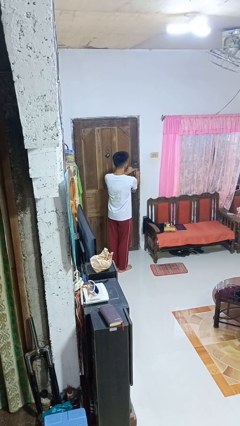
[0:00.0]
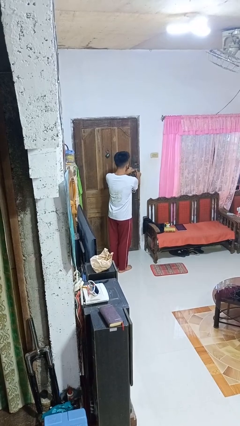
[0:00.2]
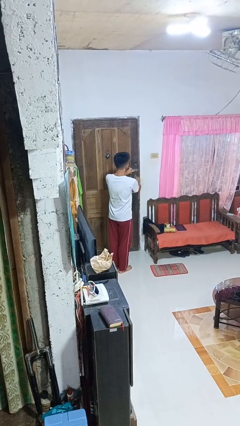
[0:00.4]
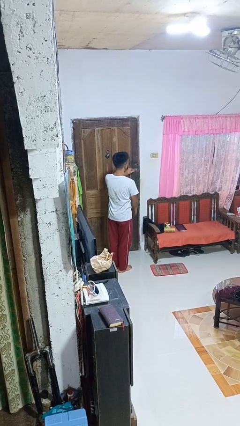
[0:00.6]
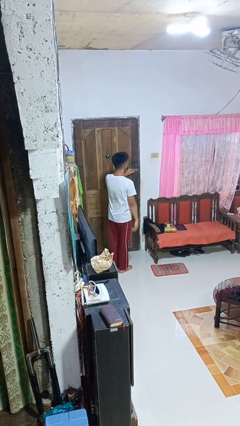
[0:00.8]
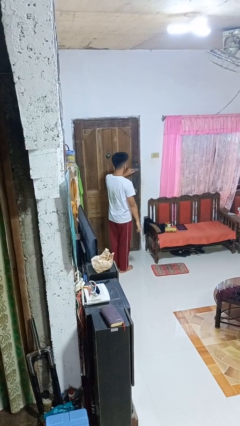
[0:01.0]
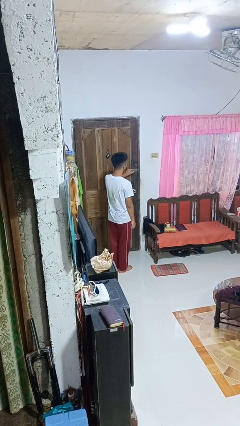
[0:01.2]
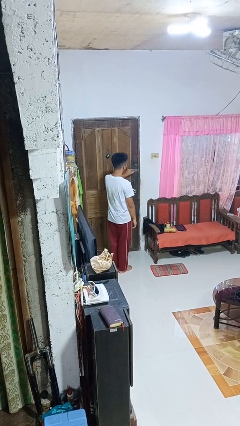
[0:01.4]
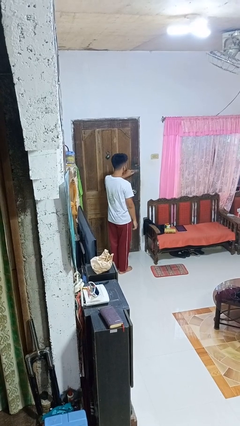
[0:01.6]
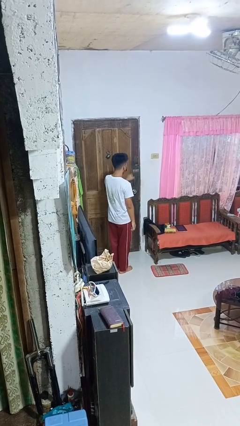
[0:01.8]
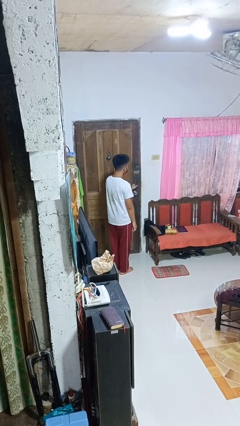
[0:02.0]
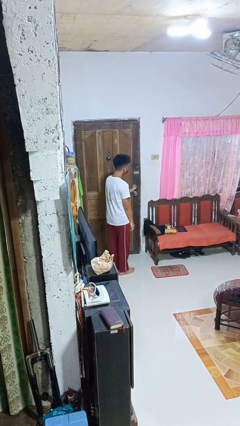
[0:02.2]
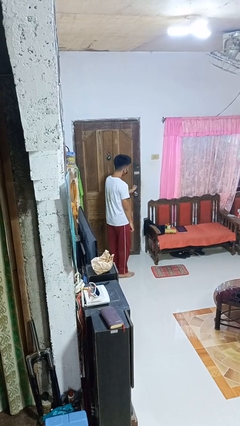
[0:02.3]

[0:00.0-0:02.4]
person unlocks door with keys

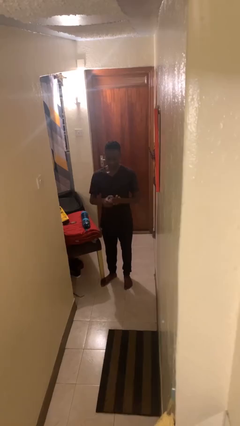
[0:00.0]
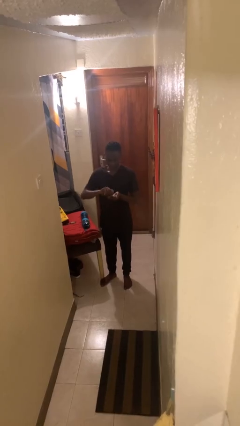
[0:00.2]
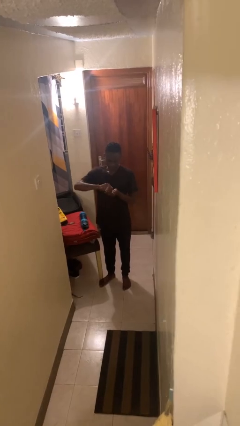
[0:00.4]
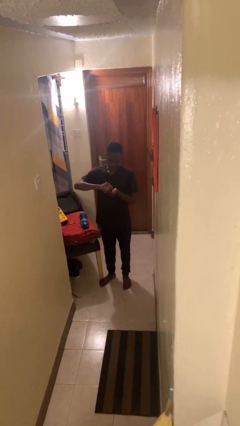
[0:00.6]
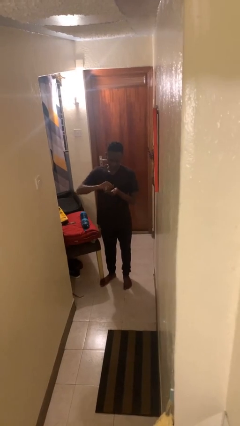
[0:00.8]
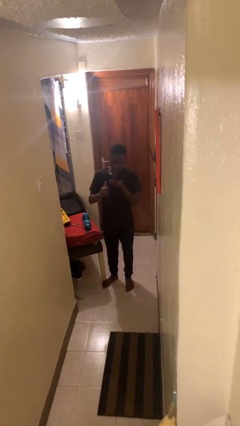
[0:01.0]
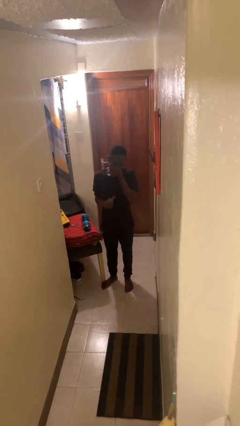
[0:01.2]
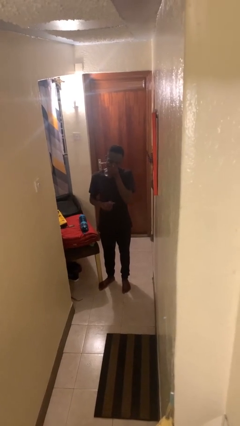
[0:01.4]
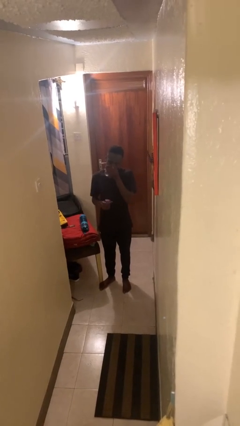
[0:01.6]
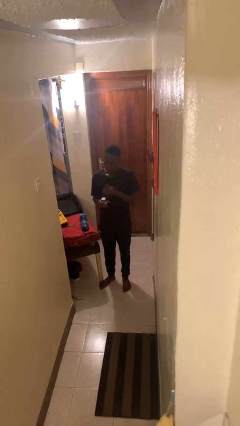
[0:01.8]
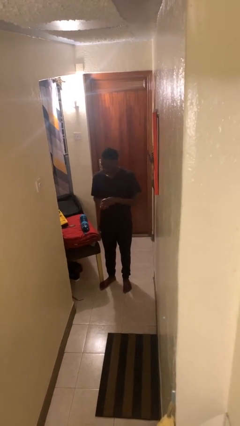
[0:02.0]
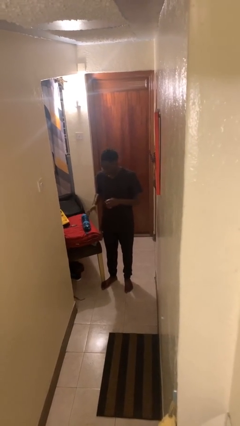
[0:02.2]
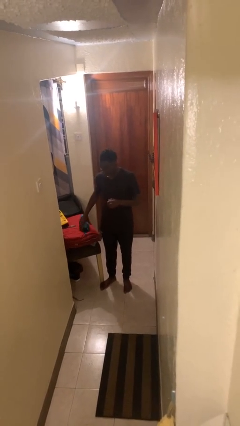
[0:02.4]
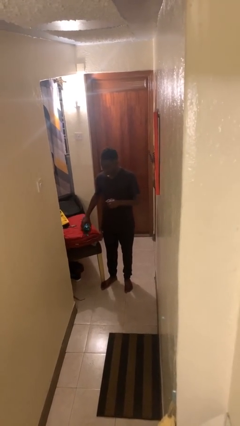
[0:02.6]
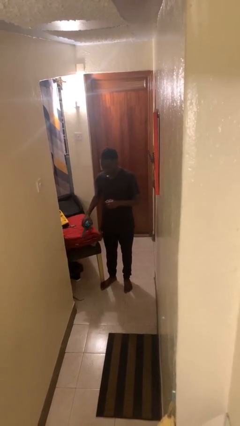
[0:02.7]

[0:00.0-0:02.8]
person takes medicine pills

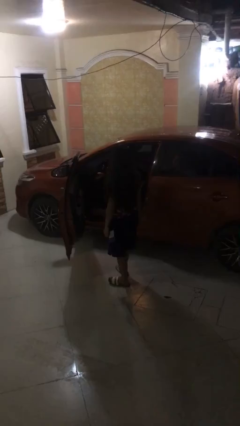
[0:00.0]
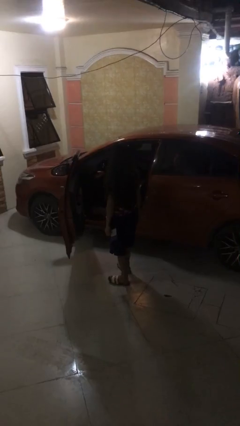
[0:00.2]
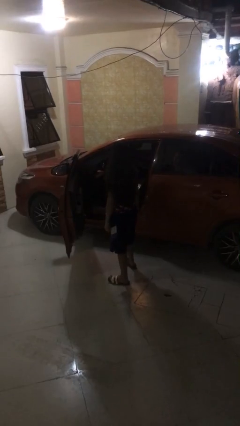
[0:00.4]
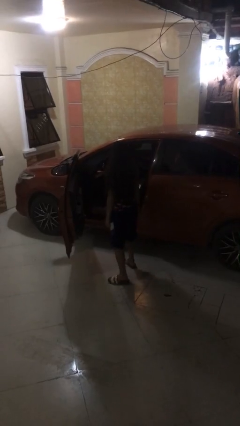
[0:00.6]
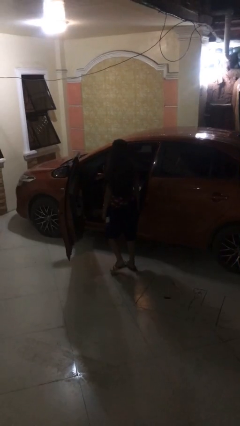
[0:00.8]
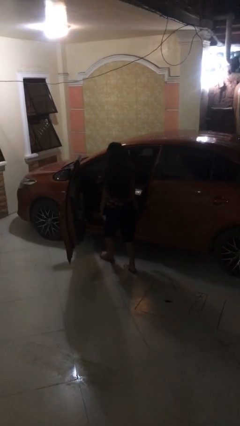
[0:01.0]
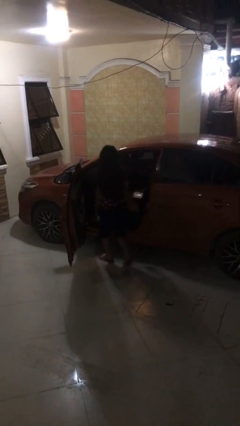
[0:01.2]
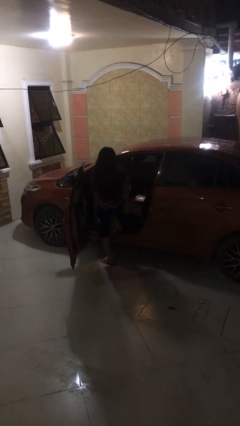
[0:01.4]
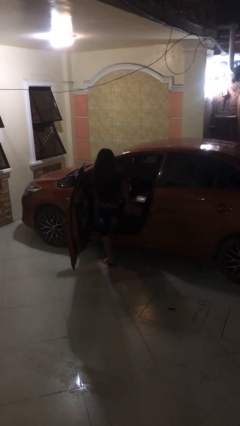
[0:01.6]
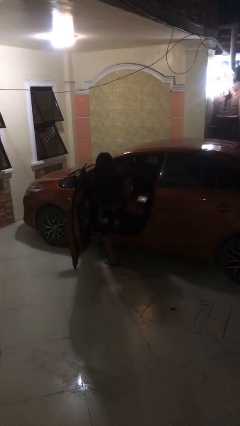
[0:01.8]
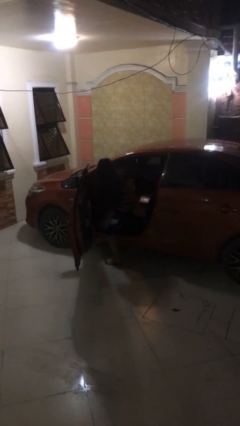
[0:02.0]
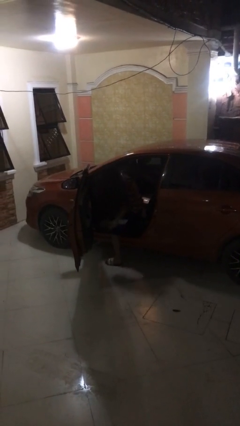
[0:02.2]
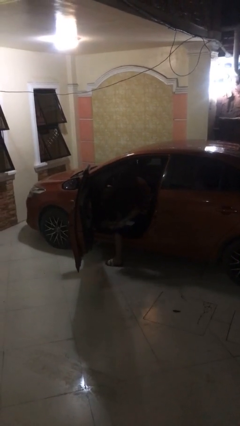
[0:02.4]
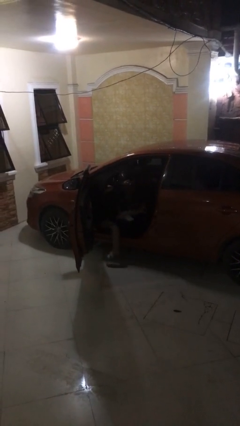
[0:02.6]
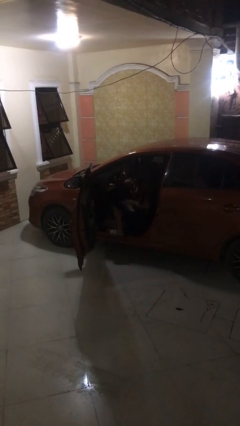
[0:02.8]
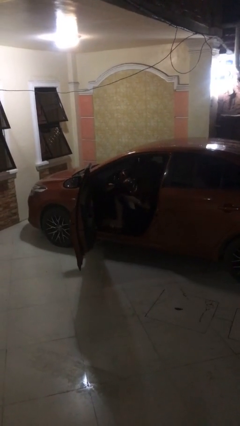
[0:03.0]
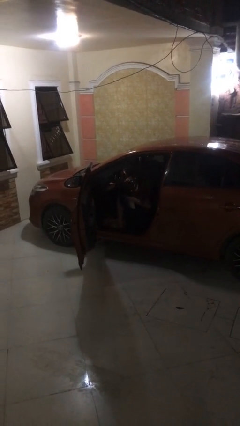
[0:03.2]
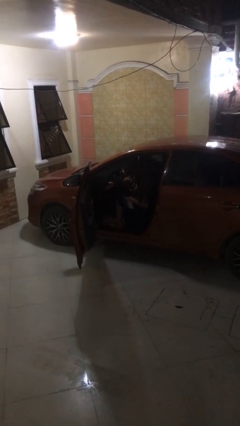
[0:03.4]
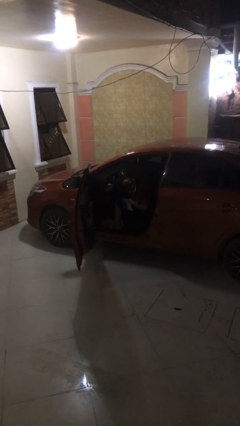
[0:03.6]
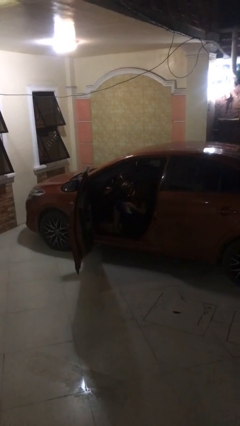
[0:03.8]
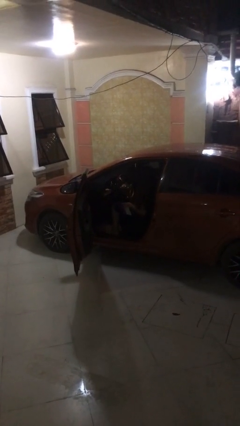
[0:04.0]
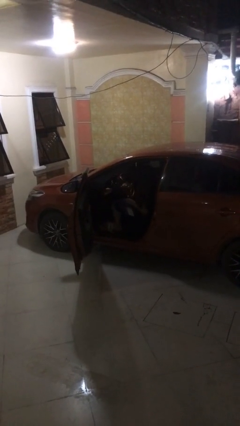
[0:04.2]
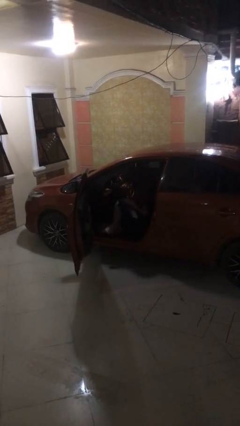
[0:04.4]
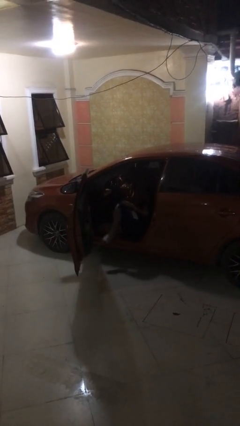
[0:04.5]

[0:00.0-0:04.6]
person enters car

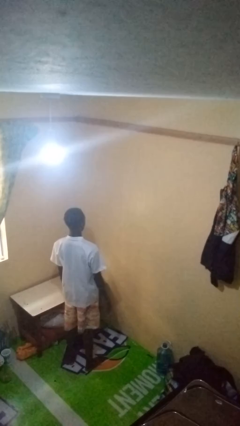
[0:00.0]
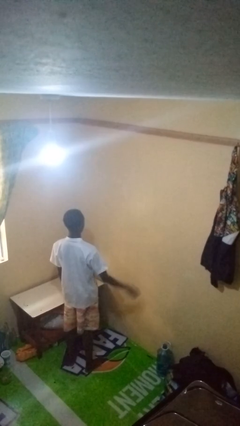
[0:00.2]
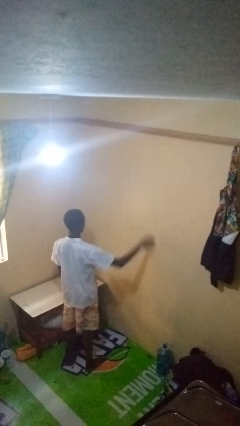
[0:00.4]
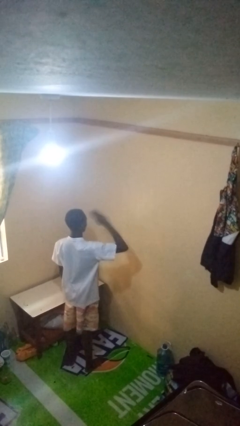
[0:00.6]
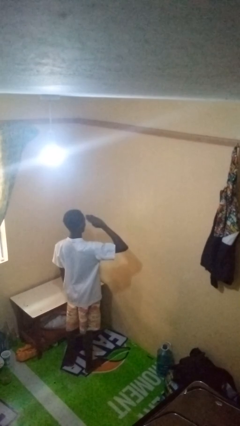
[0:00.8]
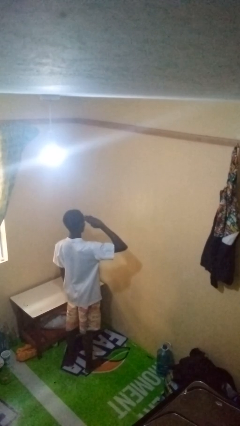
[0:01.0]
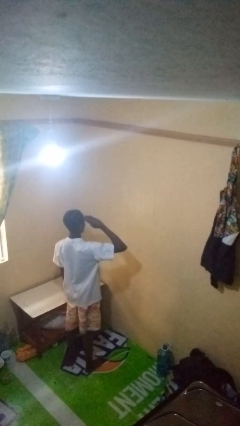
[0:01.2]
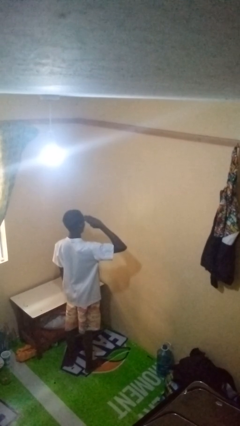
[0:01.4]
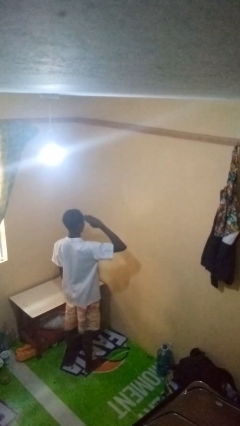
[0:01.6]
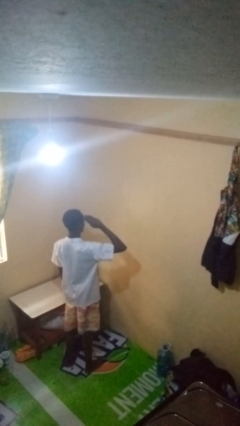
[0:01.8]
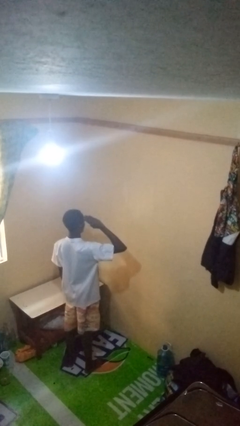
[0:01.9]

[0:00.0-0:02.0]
person salutes

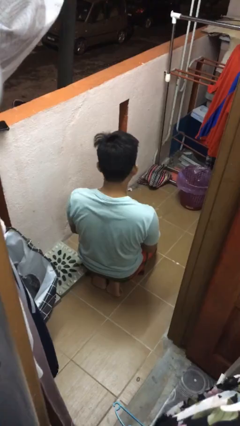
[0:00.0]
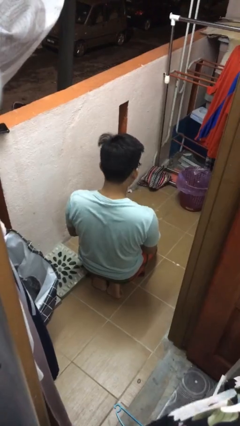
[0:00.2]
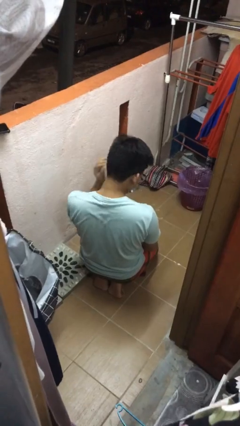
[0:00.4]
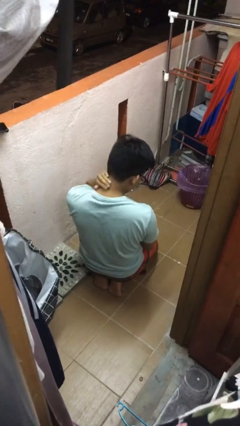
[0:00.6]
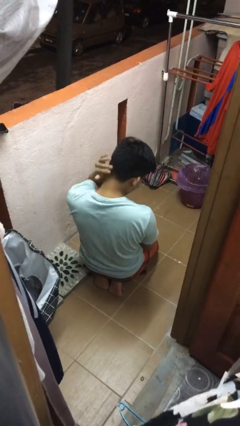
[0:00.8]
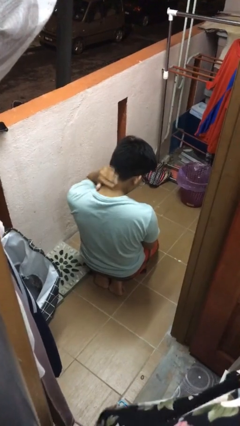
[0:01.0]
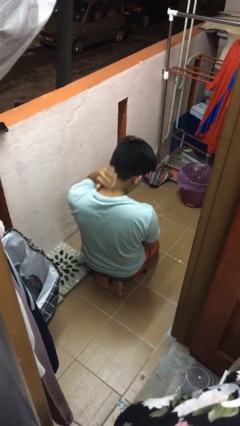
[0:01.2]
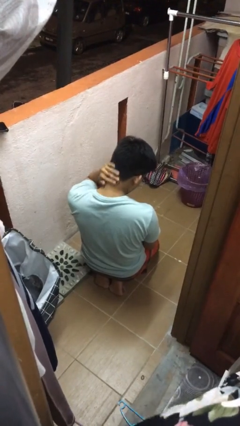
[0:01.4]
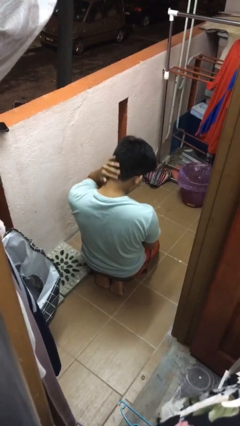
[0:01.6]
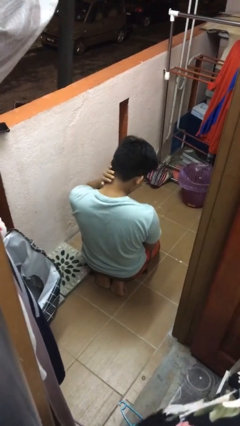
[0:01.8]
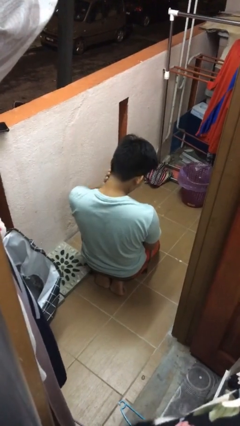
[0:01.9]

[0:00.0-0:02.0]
person rubs neck

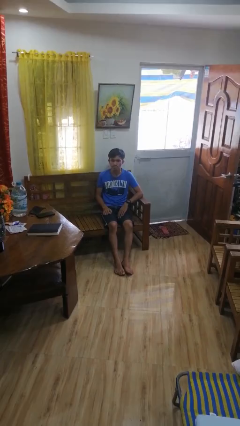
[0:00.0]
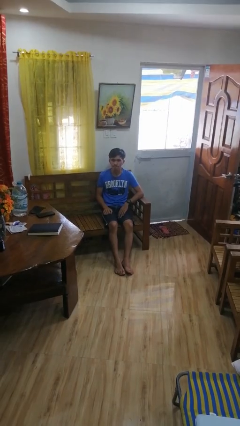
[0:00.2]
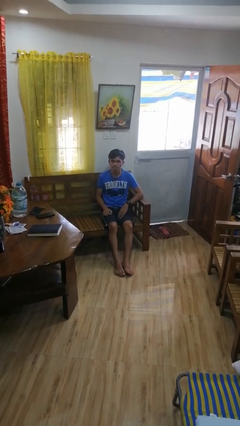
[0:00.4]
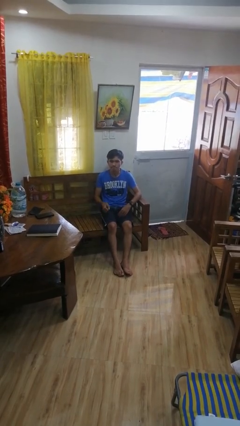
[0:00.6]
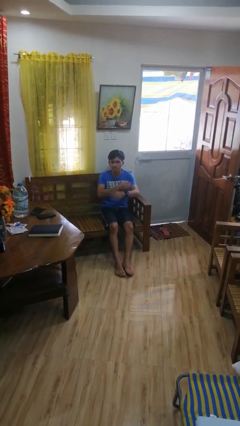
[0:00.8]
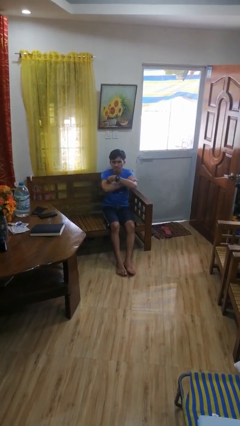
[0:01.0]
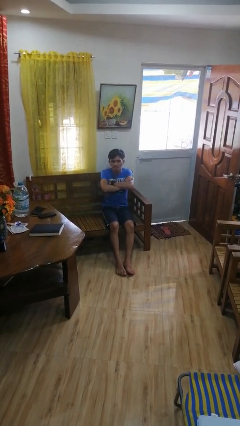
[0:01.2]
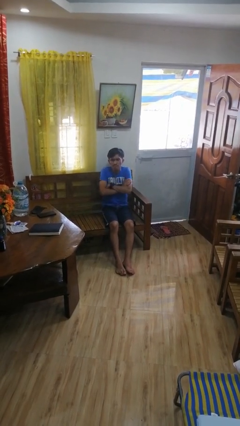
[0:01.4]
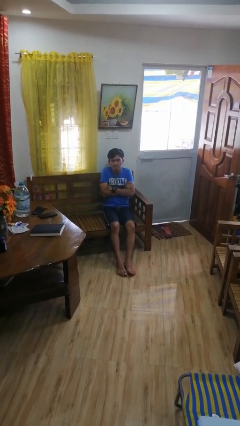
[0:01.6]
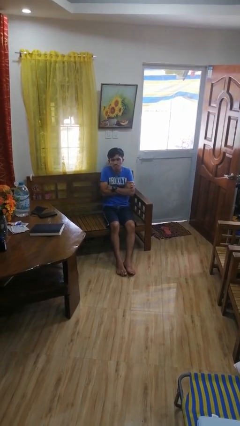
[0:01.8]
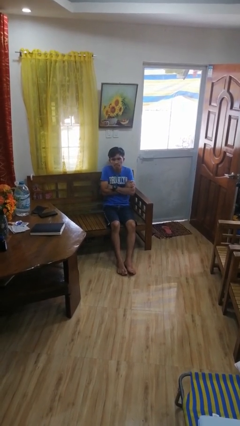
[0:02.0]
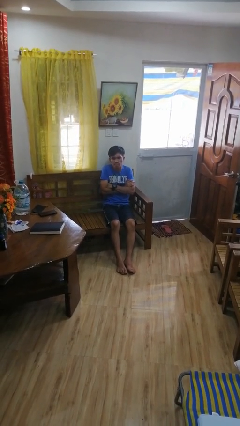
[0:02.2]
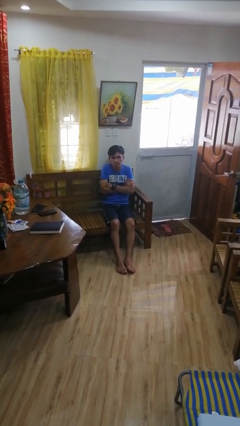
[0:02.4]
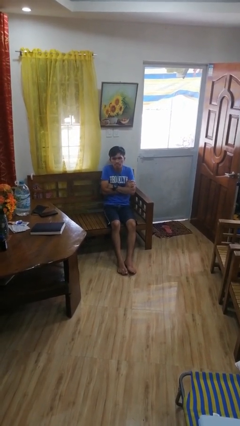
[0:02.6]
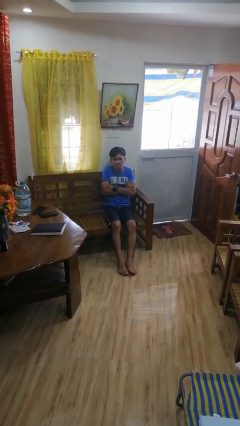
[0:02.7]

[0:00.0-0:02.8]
person crosses arms

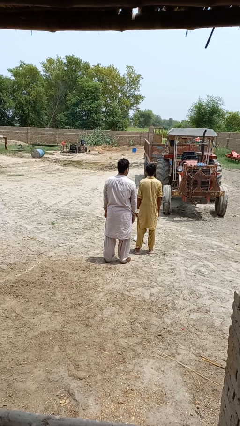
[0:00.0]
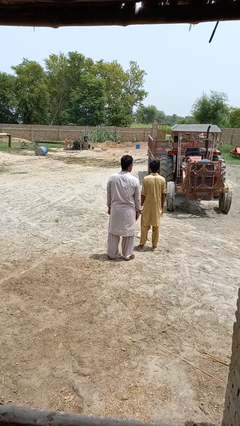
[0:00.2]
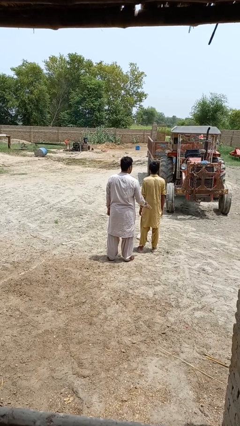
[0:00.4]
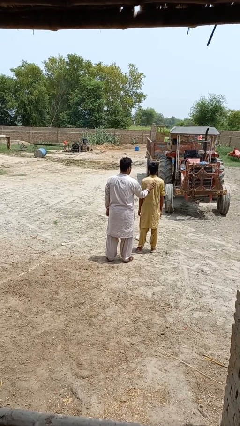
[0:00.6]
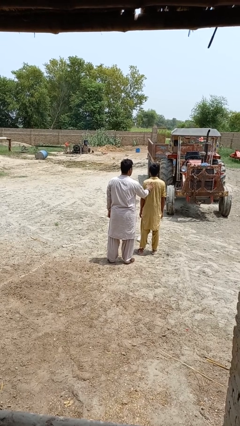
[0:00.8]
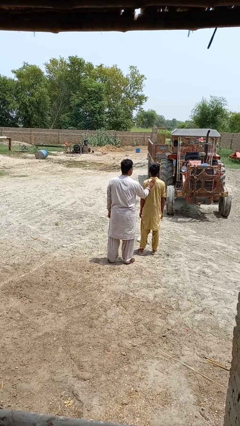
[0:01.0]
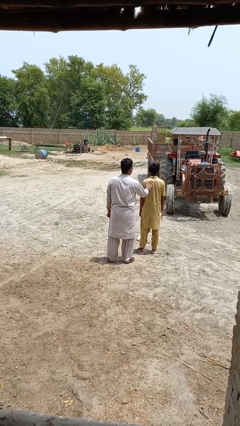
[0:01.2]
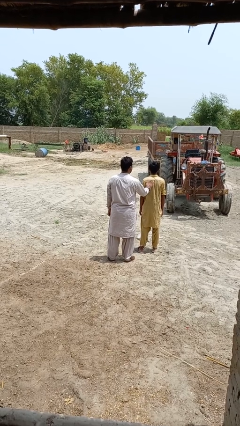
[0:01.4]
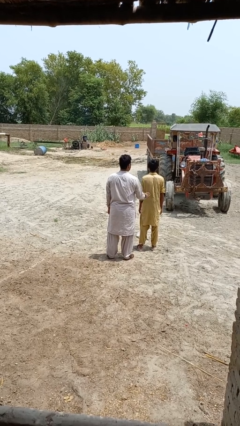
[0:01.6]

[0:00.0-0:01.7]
person touches back of person
